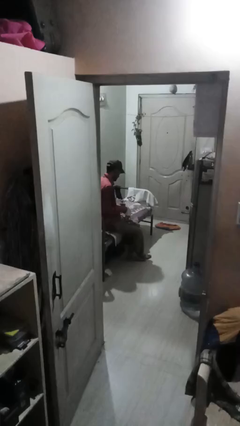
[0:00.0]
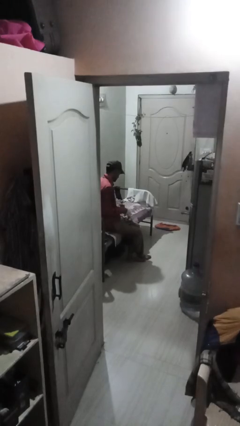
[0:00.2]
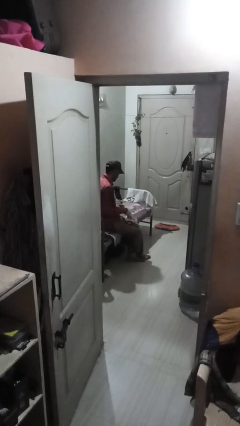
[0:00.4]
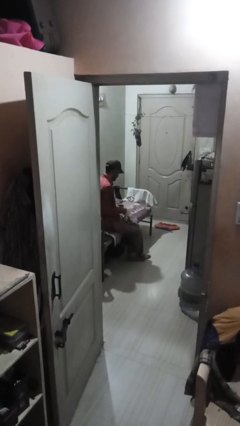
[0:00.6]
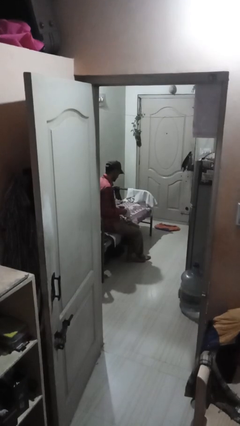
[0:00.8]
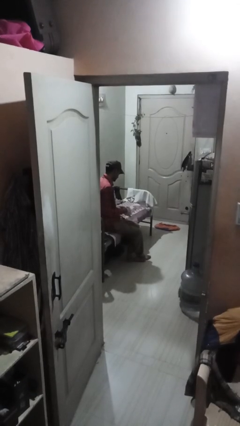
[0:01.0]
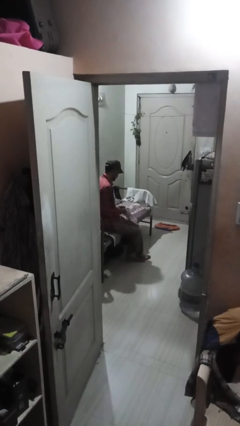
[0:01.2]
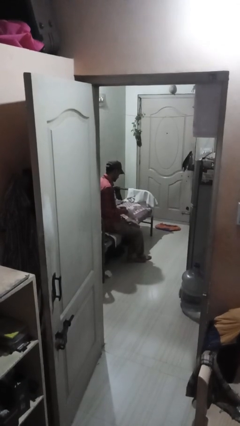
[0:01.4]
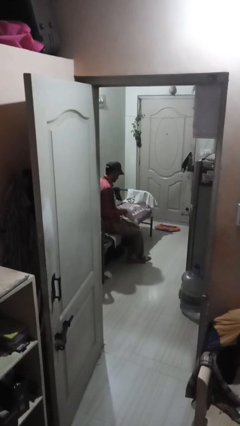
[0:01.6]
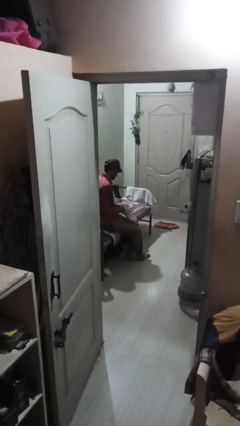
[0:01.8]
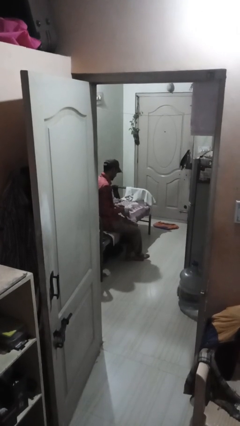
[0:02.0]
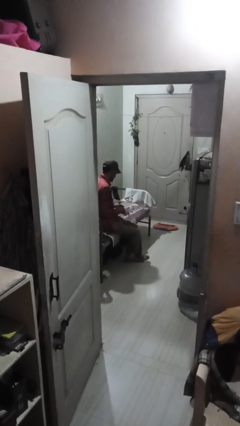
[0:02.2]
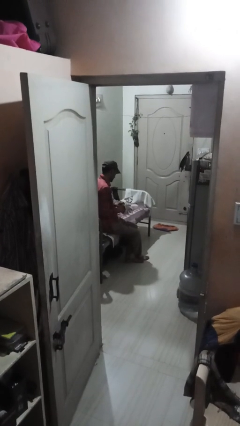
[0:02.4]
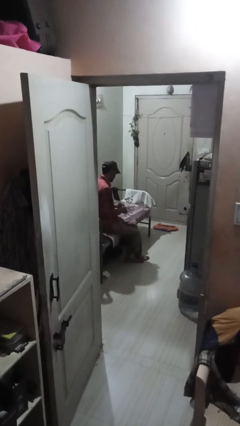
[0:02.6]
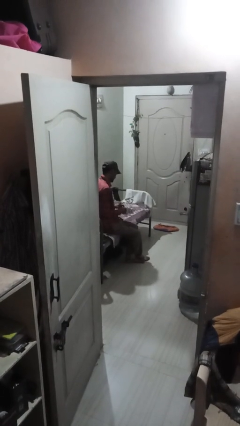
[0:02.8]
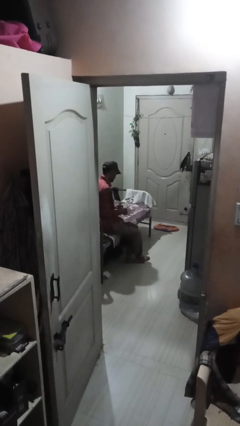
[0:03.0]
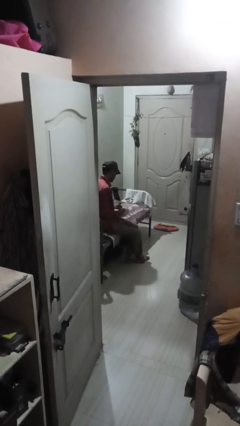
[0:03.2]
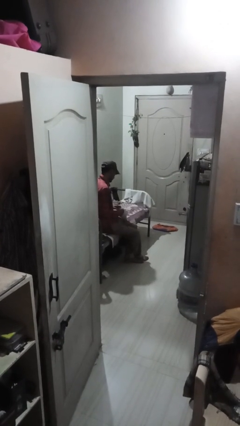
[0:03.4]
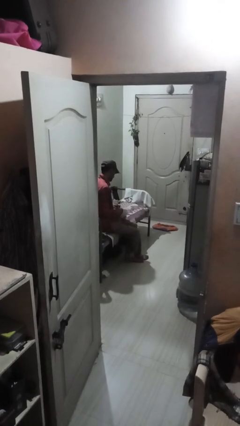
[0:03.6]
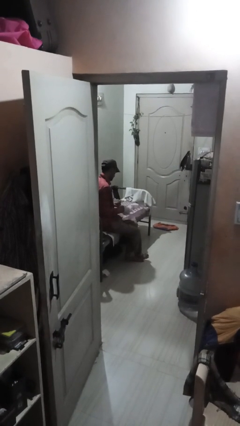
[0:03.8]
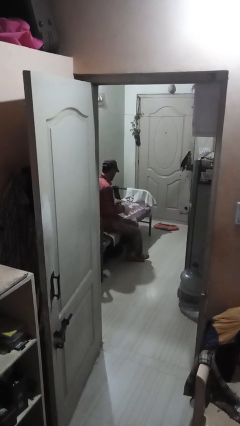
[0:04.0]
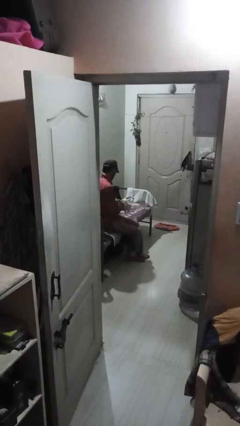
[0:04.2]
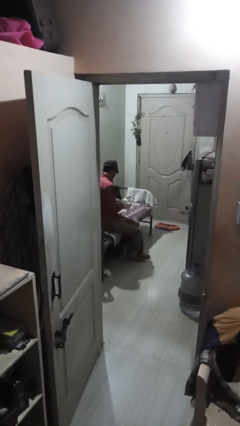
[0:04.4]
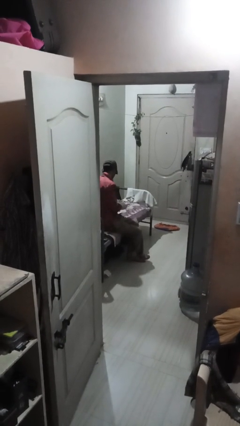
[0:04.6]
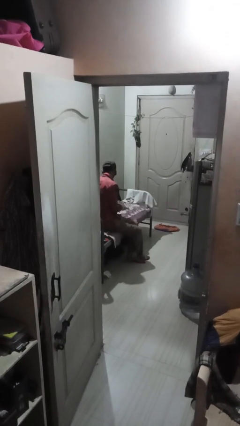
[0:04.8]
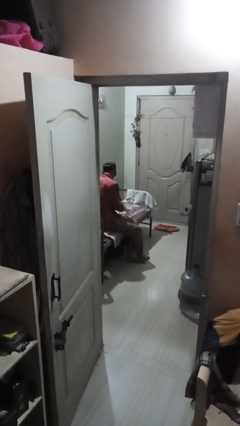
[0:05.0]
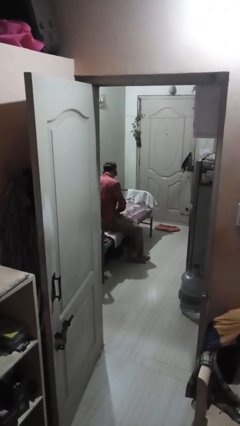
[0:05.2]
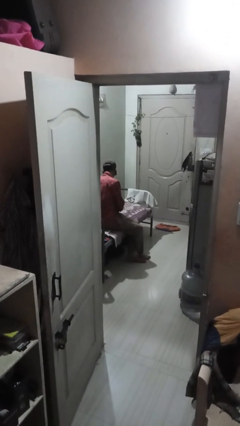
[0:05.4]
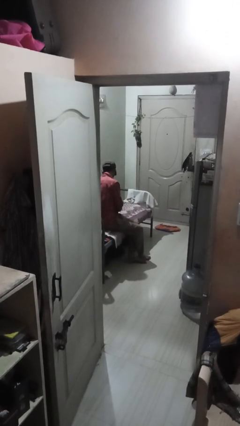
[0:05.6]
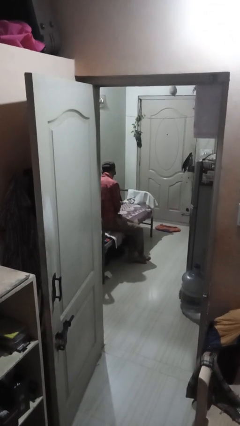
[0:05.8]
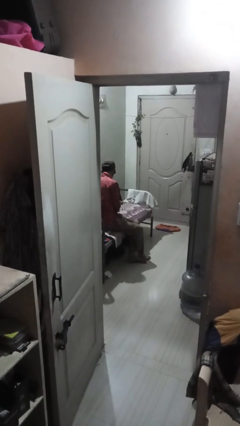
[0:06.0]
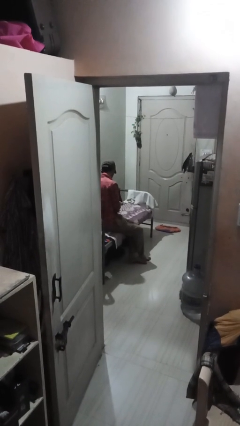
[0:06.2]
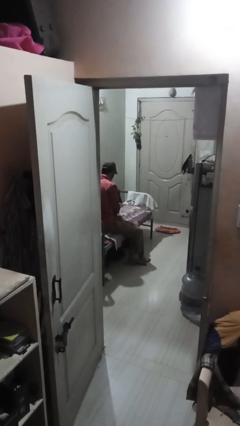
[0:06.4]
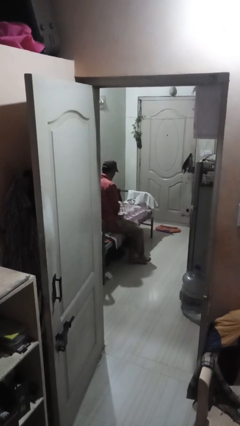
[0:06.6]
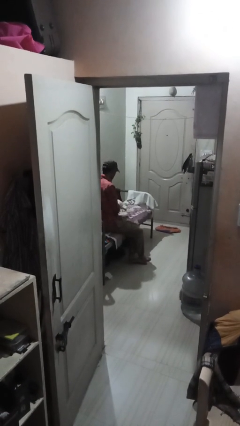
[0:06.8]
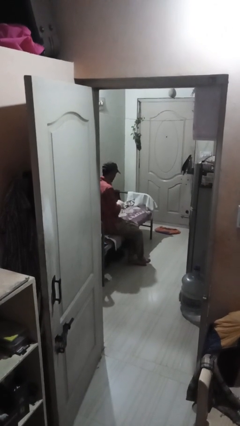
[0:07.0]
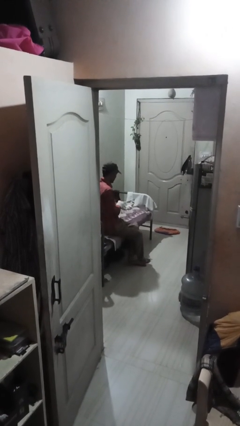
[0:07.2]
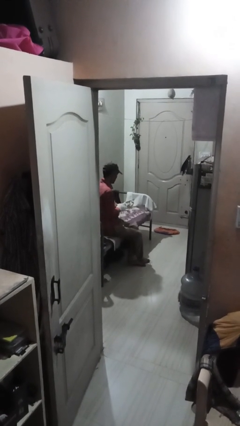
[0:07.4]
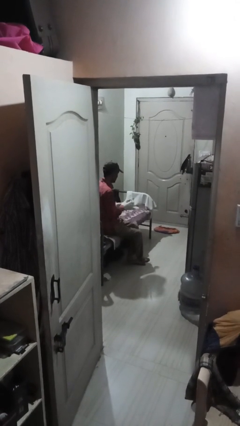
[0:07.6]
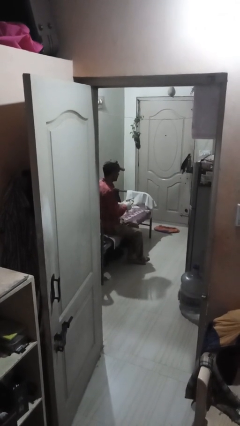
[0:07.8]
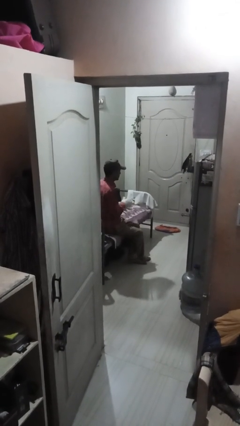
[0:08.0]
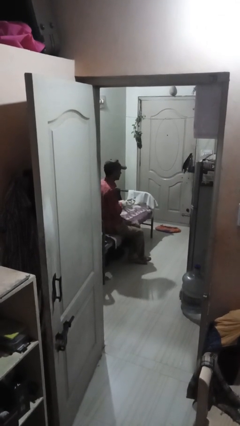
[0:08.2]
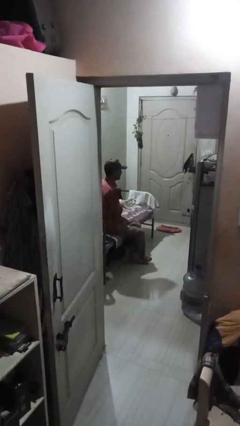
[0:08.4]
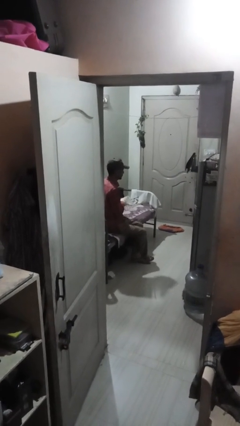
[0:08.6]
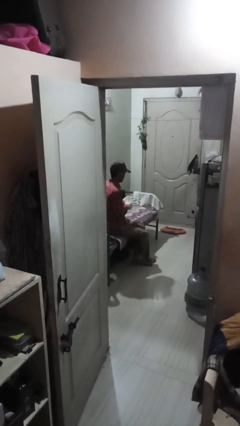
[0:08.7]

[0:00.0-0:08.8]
person puts on gloves

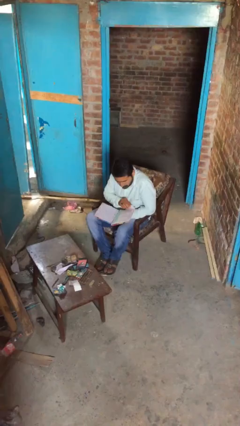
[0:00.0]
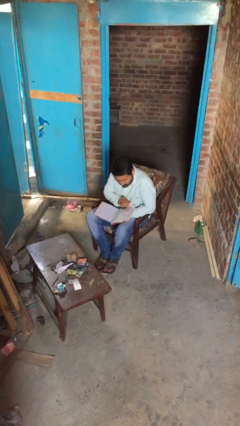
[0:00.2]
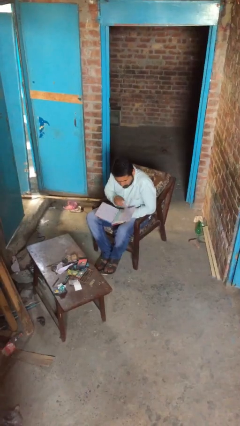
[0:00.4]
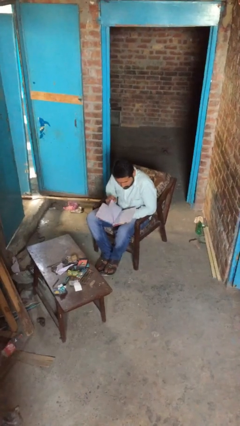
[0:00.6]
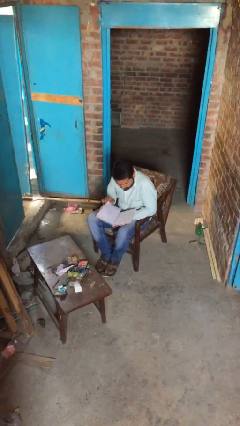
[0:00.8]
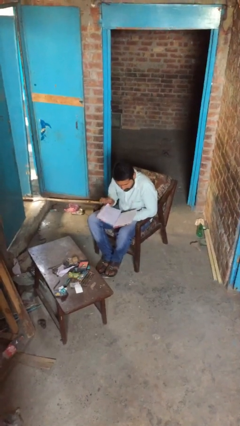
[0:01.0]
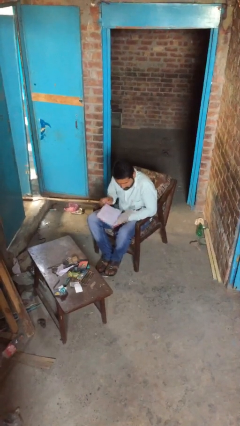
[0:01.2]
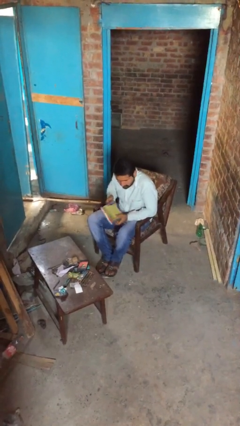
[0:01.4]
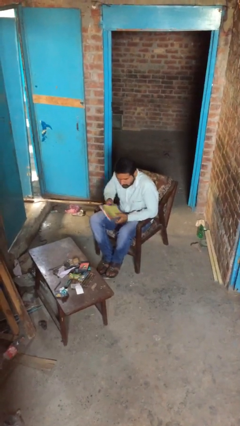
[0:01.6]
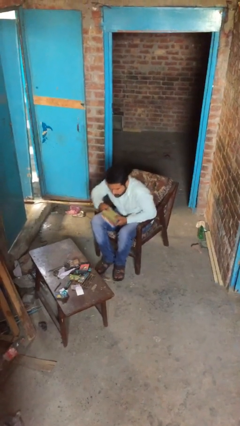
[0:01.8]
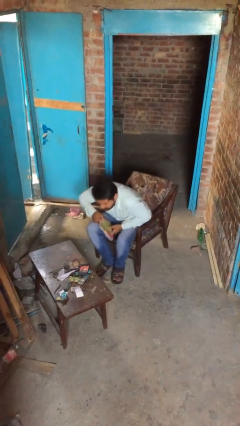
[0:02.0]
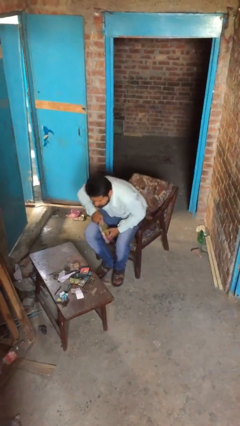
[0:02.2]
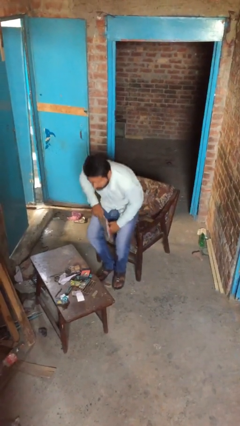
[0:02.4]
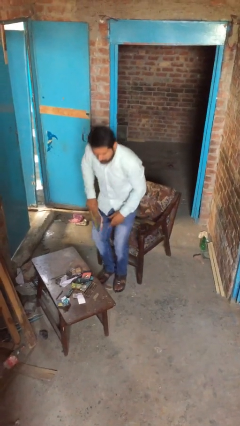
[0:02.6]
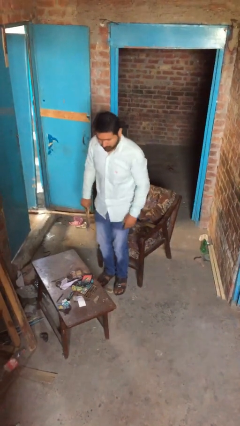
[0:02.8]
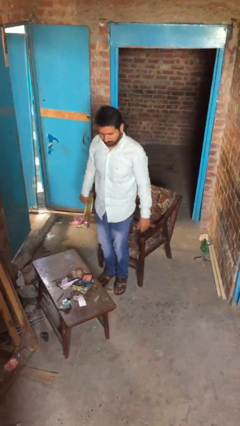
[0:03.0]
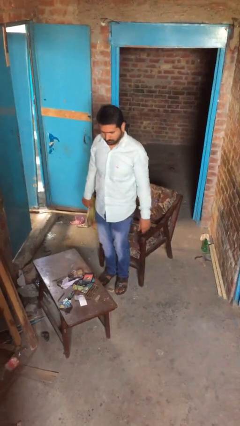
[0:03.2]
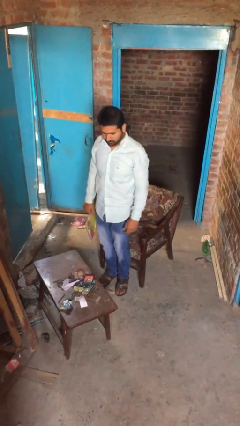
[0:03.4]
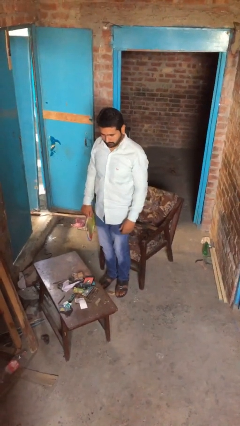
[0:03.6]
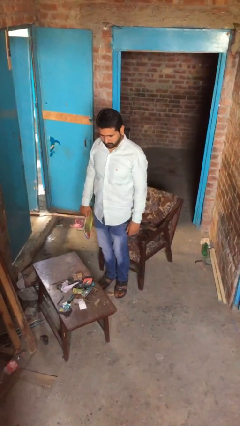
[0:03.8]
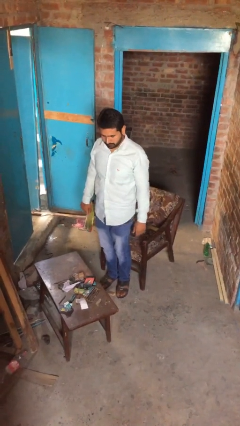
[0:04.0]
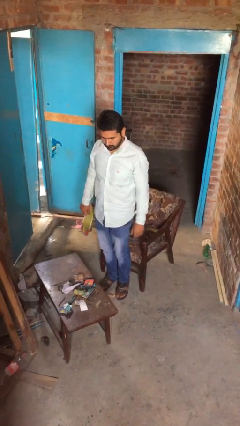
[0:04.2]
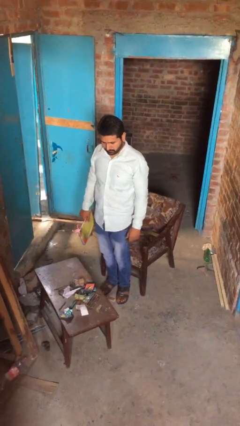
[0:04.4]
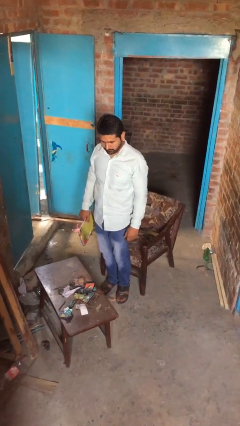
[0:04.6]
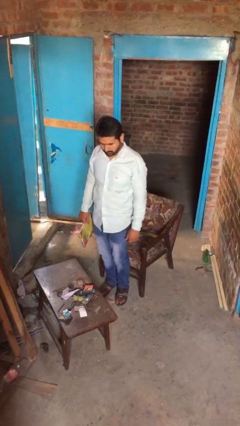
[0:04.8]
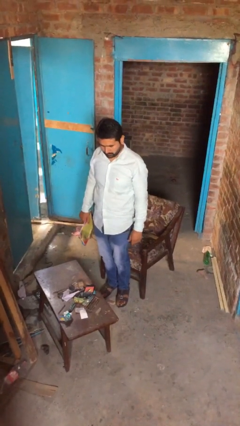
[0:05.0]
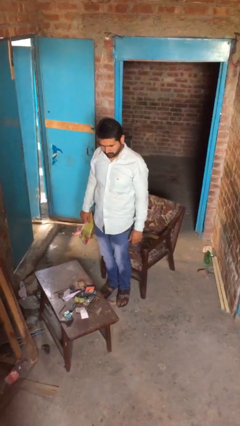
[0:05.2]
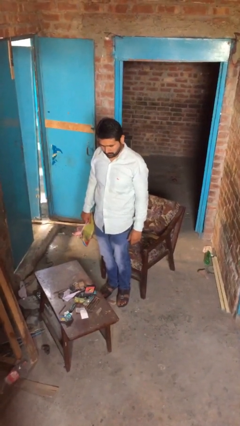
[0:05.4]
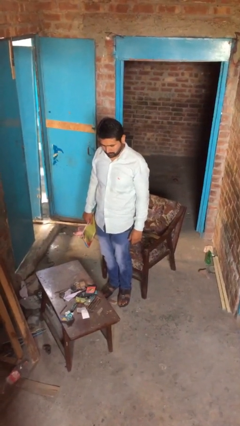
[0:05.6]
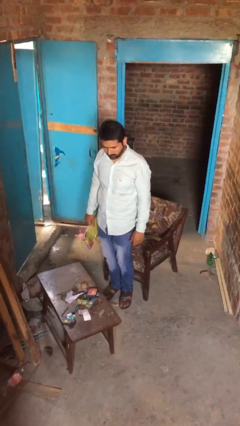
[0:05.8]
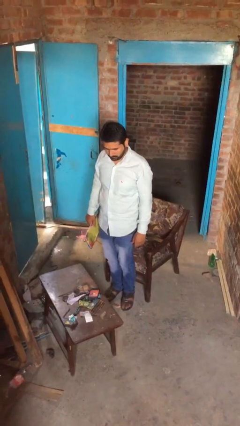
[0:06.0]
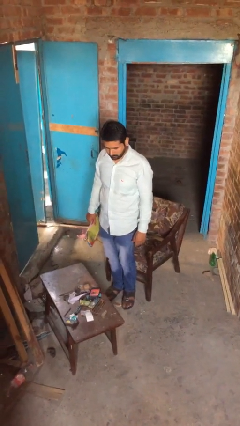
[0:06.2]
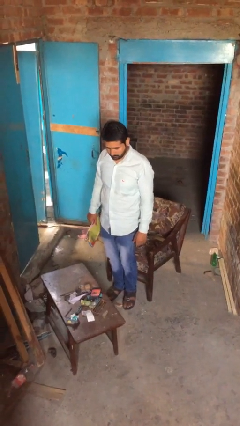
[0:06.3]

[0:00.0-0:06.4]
person stands up

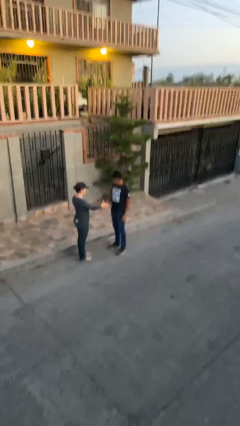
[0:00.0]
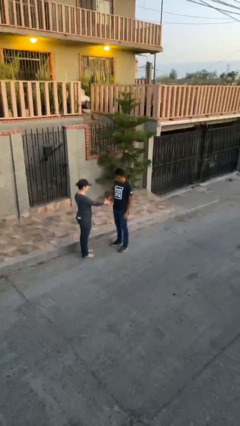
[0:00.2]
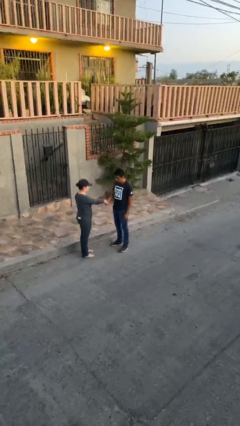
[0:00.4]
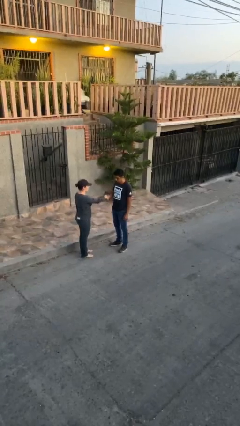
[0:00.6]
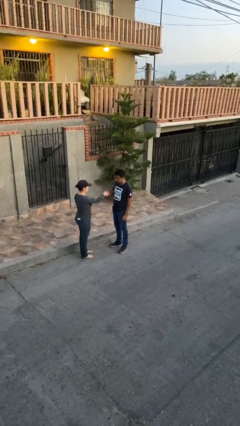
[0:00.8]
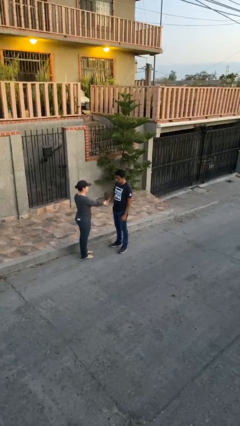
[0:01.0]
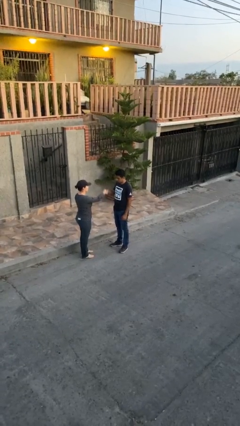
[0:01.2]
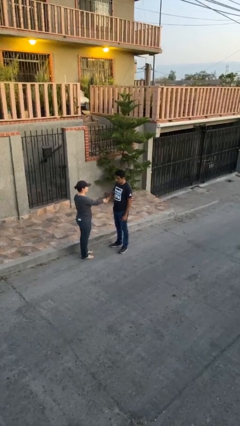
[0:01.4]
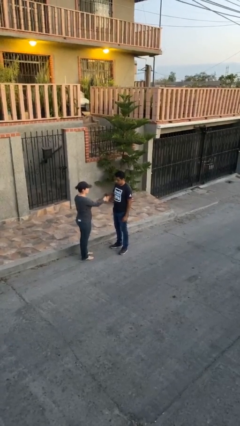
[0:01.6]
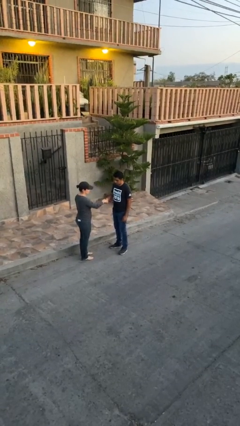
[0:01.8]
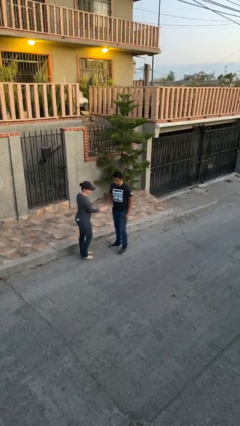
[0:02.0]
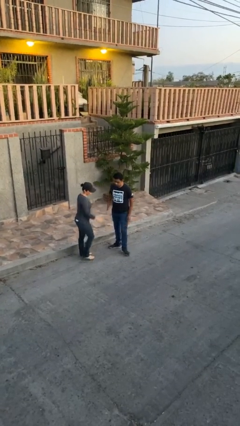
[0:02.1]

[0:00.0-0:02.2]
person shakes hand

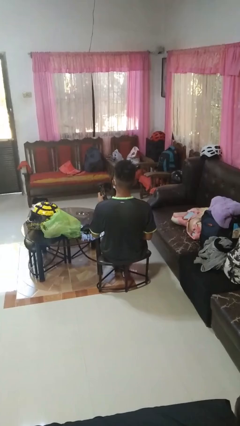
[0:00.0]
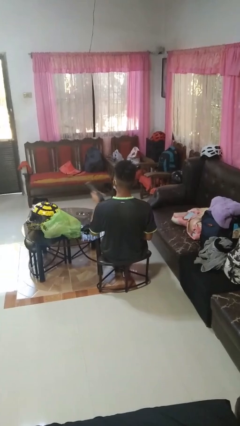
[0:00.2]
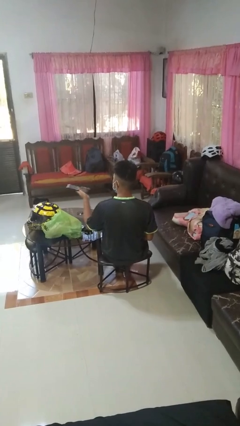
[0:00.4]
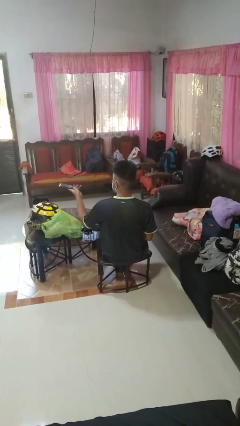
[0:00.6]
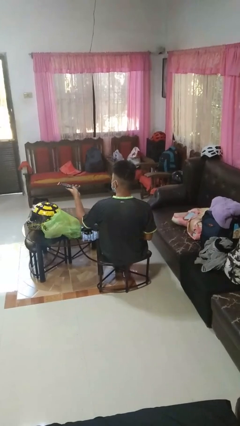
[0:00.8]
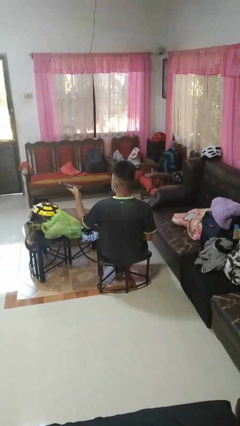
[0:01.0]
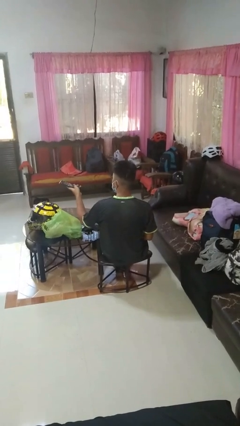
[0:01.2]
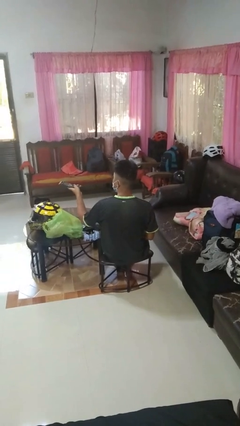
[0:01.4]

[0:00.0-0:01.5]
person uses television remote
